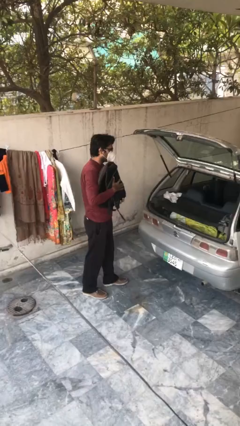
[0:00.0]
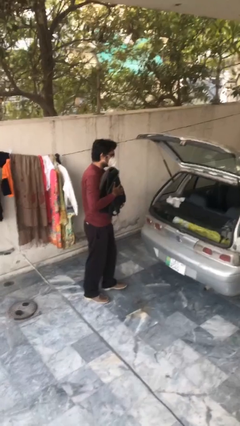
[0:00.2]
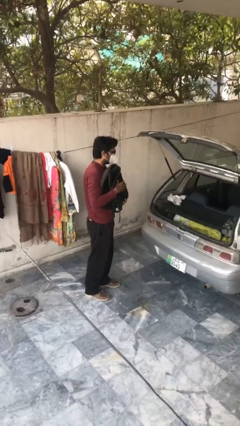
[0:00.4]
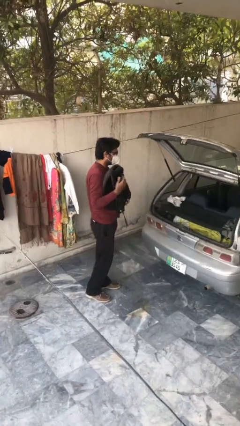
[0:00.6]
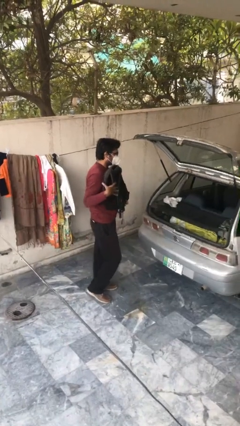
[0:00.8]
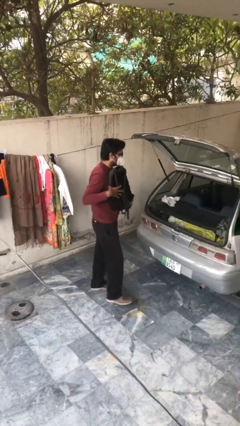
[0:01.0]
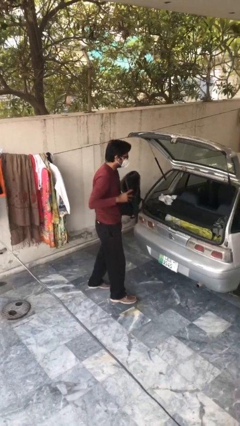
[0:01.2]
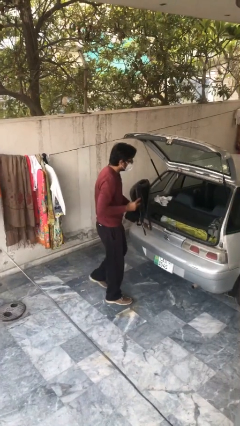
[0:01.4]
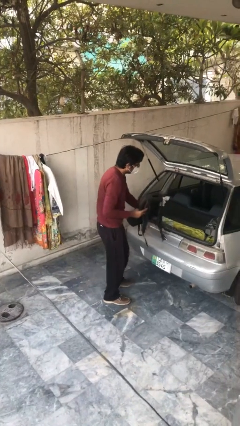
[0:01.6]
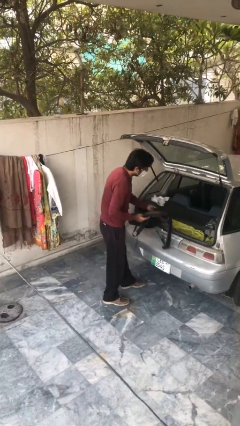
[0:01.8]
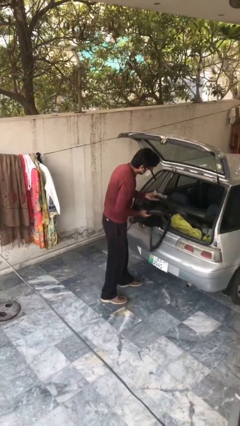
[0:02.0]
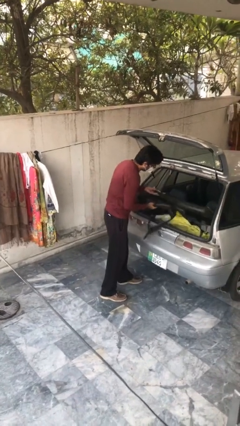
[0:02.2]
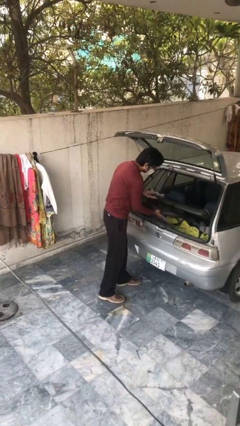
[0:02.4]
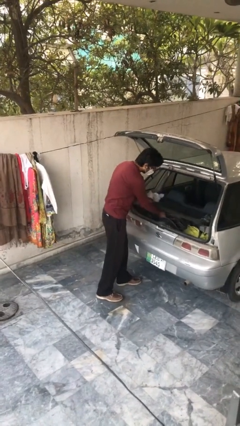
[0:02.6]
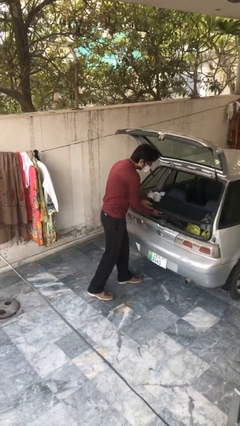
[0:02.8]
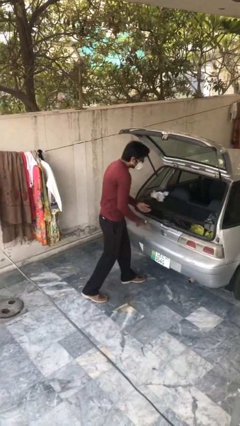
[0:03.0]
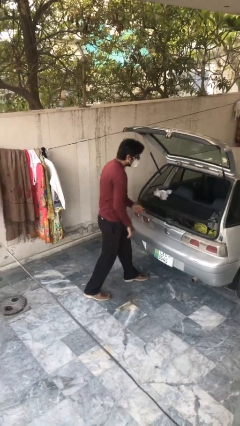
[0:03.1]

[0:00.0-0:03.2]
person loads car

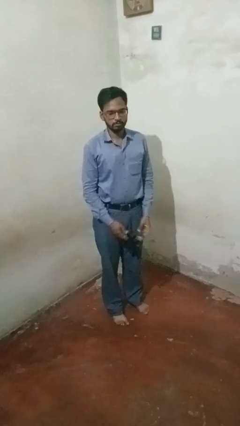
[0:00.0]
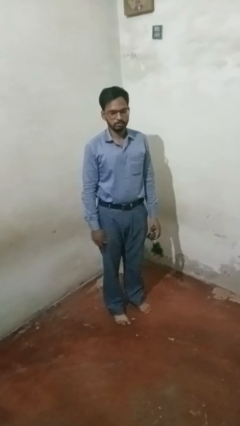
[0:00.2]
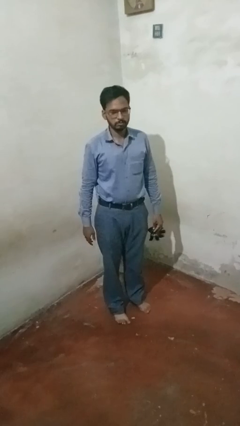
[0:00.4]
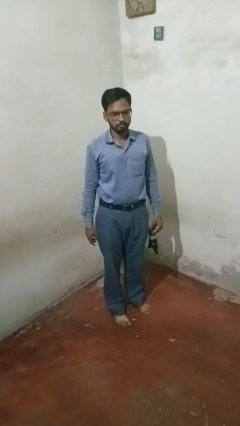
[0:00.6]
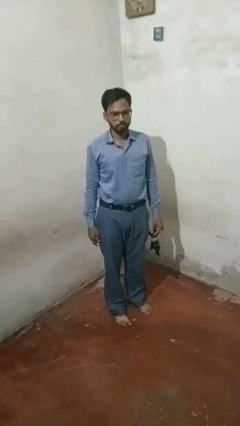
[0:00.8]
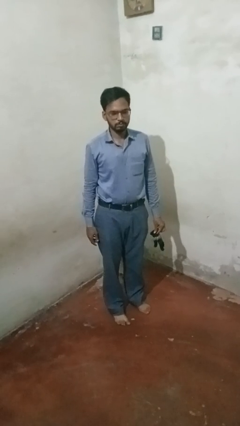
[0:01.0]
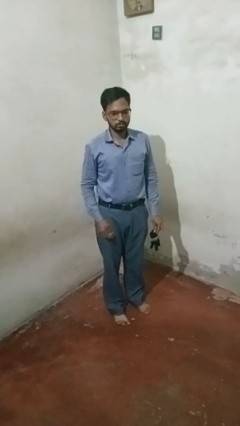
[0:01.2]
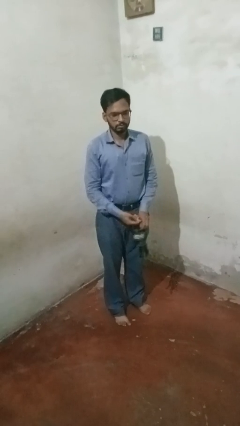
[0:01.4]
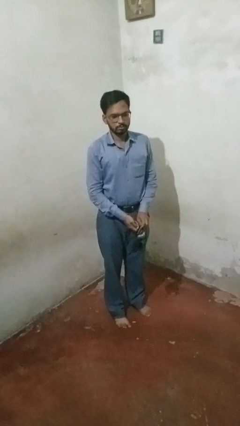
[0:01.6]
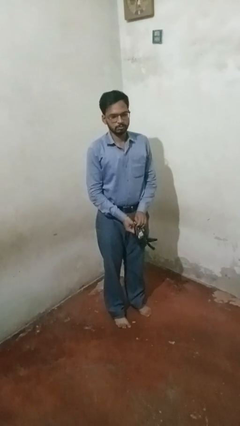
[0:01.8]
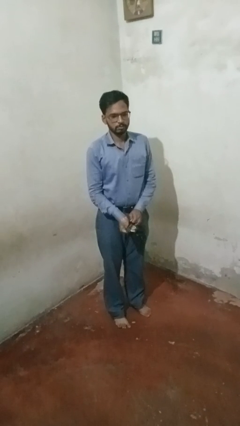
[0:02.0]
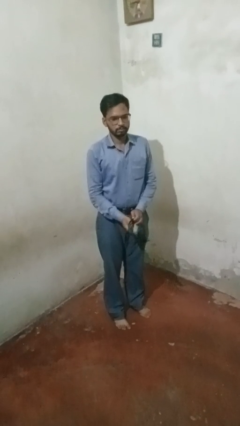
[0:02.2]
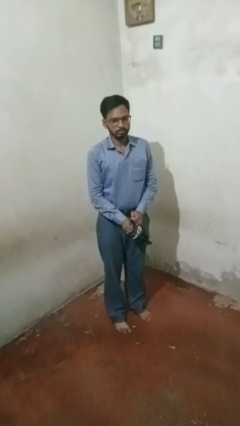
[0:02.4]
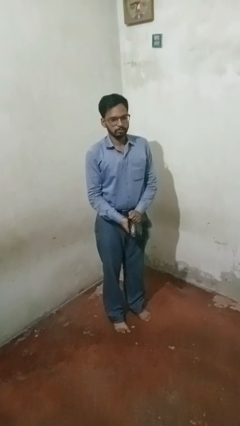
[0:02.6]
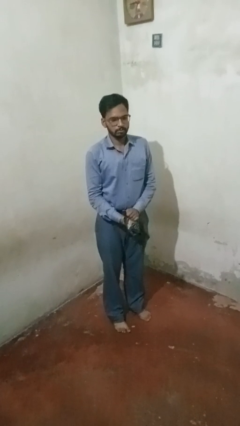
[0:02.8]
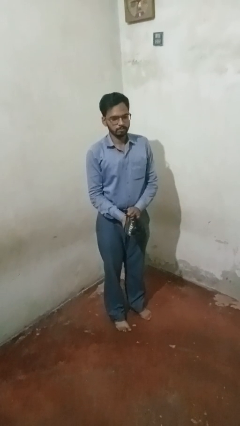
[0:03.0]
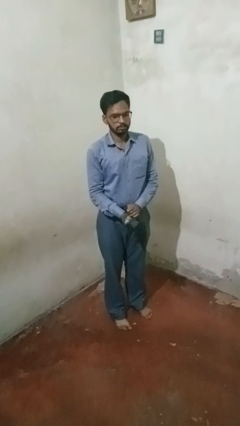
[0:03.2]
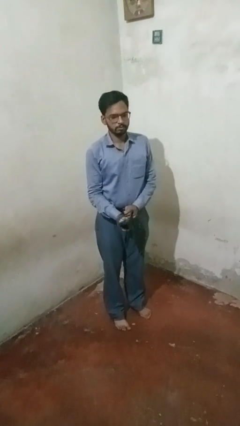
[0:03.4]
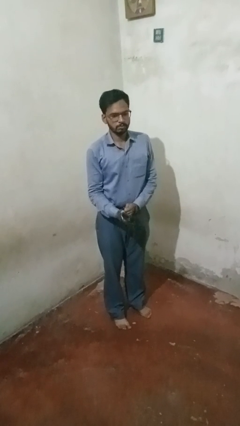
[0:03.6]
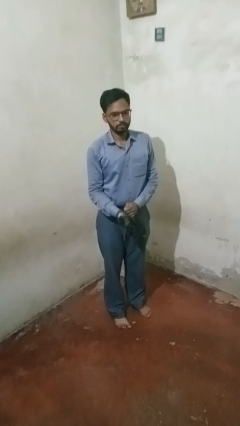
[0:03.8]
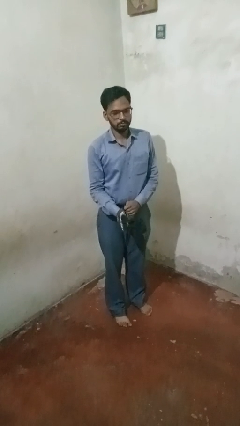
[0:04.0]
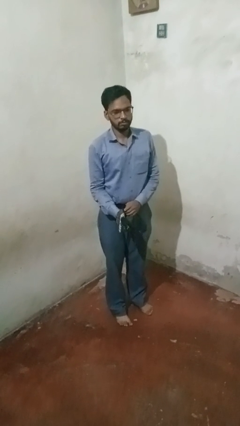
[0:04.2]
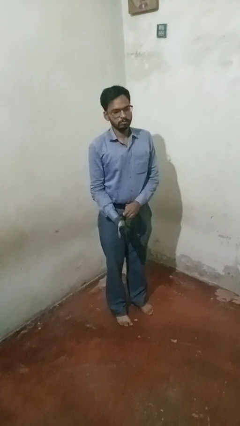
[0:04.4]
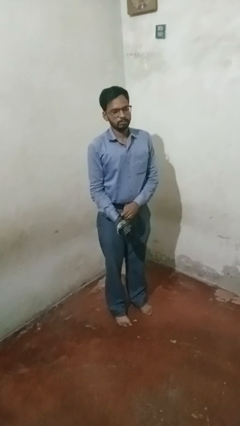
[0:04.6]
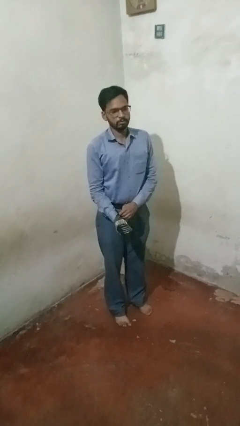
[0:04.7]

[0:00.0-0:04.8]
person puts on gloves

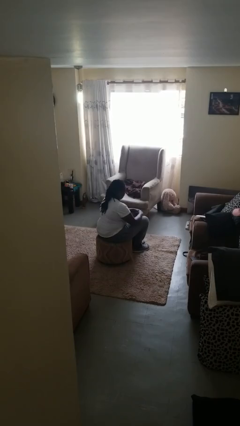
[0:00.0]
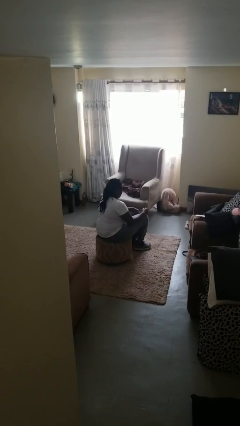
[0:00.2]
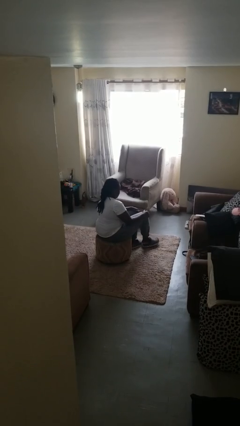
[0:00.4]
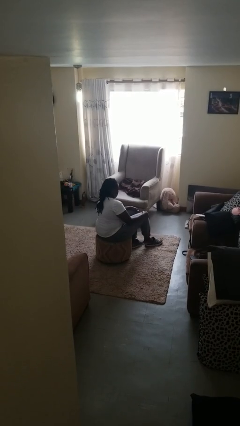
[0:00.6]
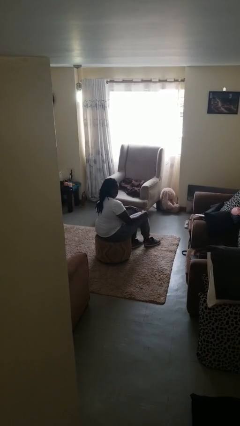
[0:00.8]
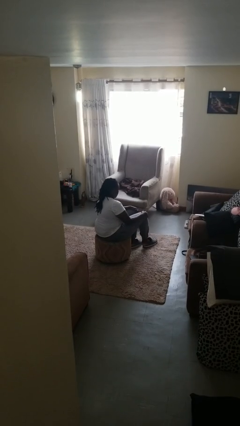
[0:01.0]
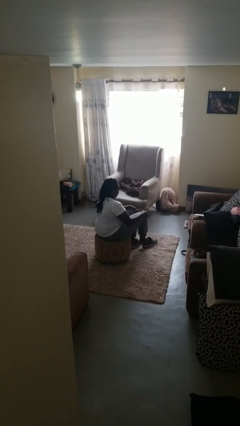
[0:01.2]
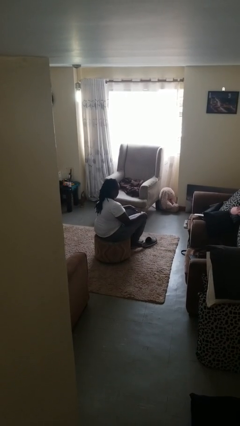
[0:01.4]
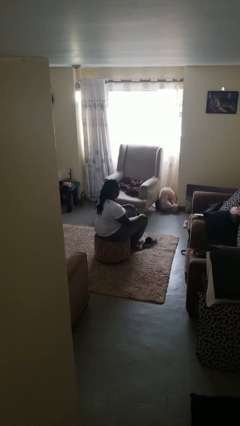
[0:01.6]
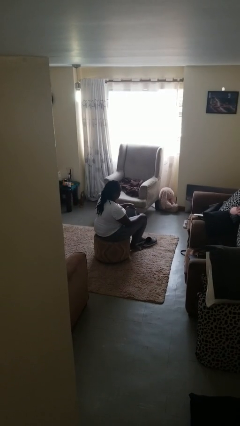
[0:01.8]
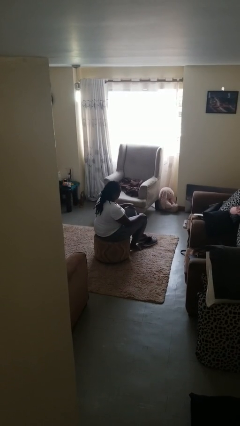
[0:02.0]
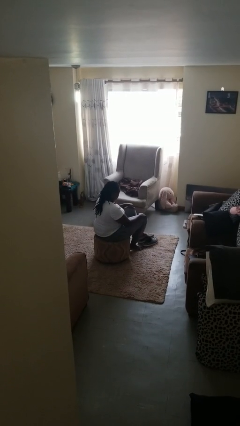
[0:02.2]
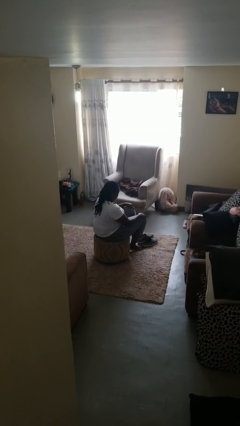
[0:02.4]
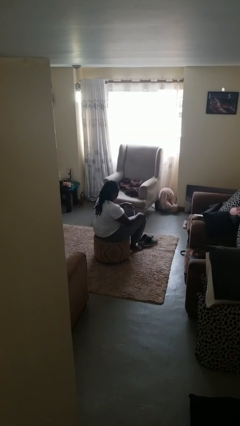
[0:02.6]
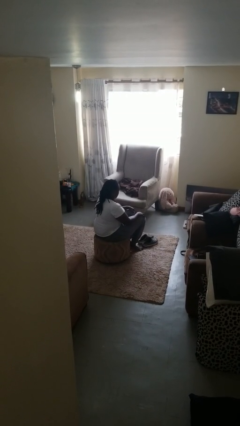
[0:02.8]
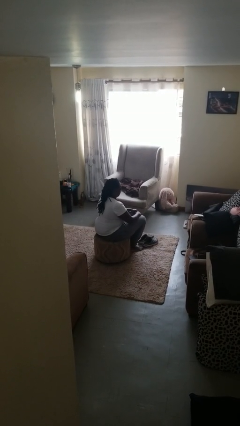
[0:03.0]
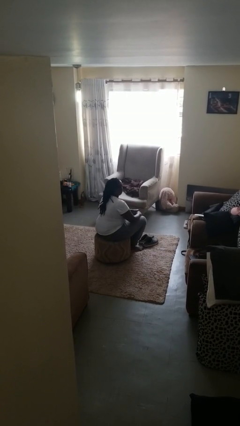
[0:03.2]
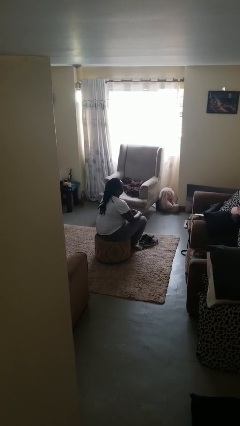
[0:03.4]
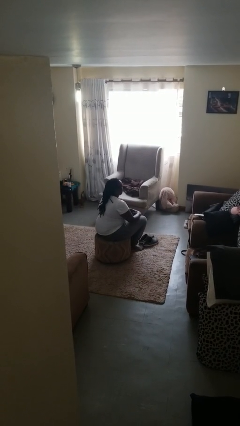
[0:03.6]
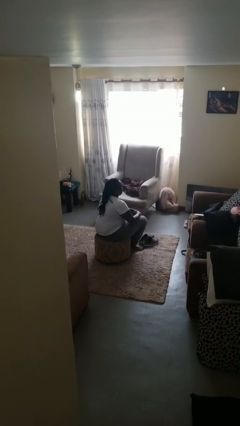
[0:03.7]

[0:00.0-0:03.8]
person takes off shoes

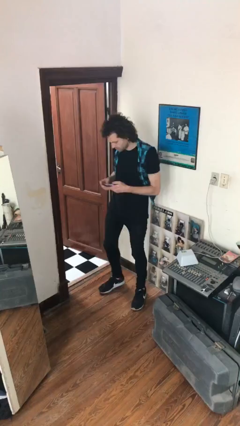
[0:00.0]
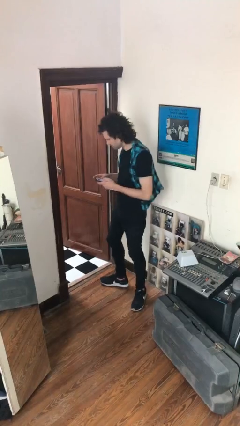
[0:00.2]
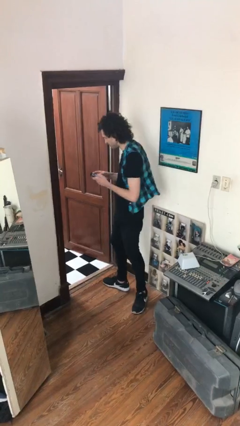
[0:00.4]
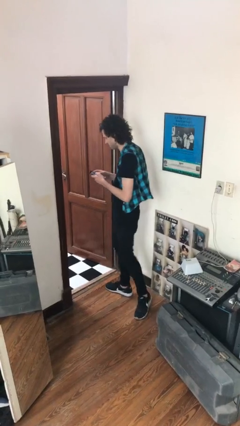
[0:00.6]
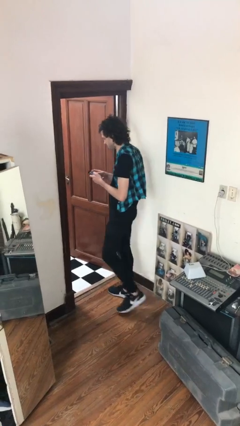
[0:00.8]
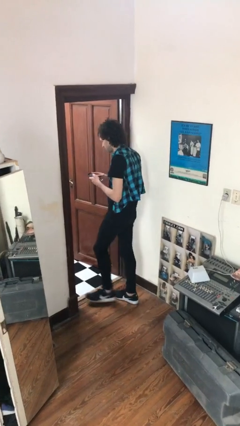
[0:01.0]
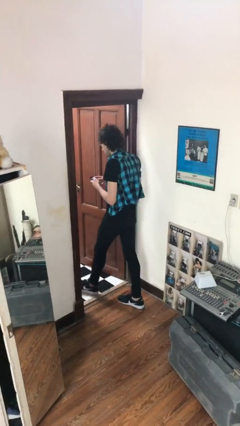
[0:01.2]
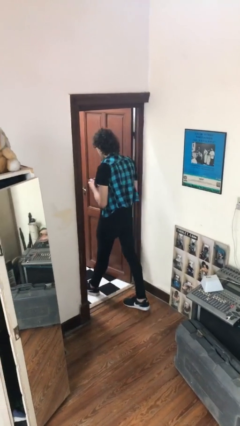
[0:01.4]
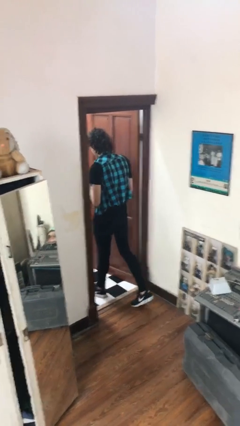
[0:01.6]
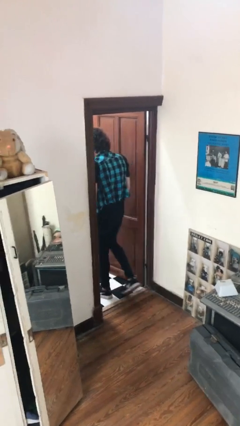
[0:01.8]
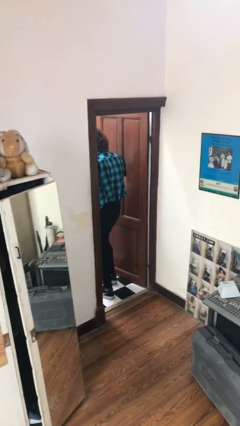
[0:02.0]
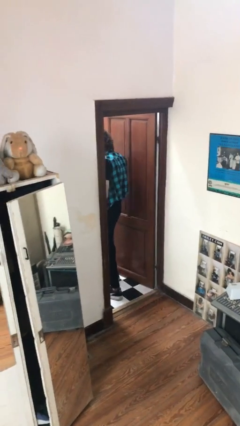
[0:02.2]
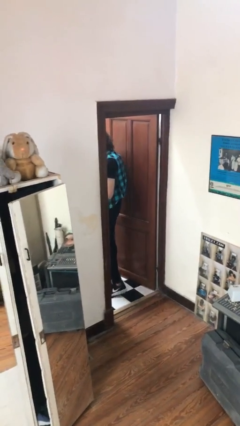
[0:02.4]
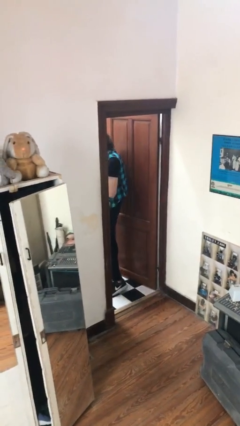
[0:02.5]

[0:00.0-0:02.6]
person exits scene through structure

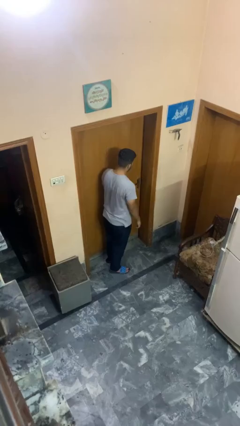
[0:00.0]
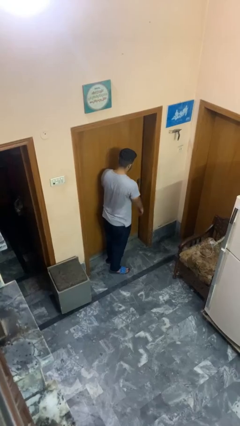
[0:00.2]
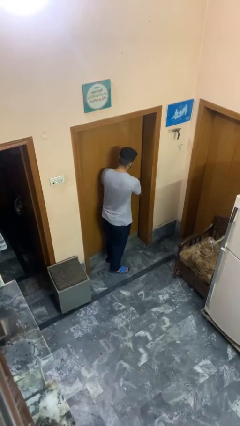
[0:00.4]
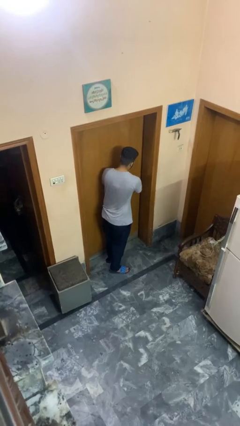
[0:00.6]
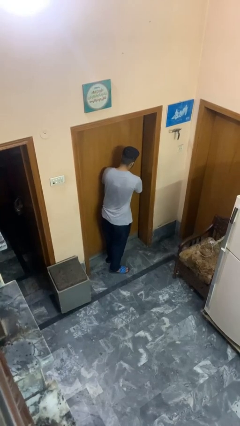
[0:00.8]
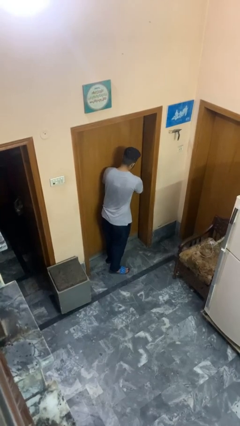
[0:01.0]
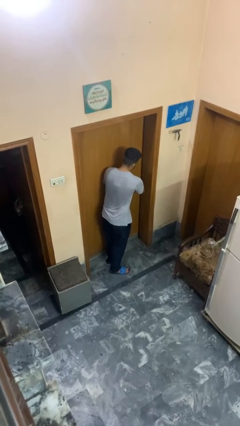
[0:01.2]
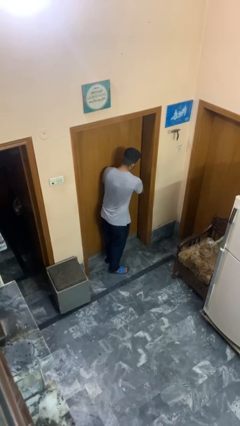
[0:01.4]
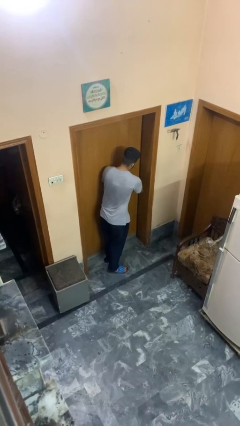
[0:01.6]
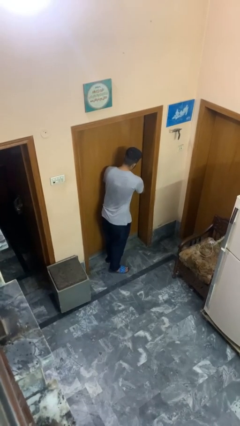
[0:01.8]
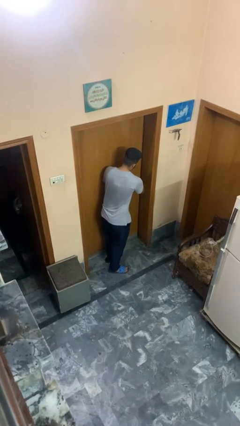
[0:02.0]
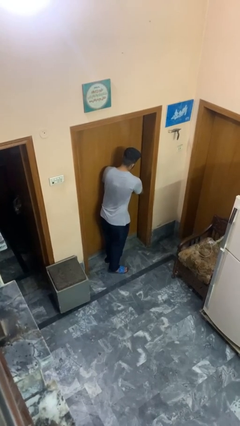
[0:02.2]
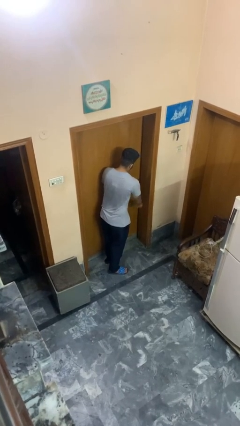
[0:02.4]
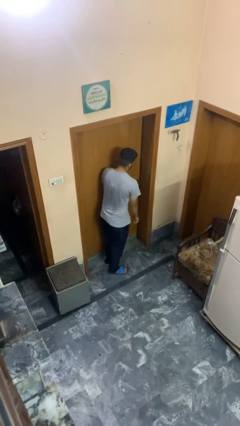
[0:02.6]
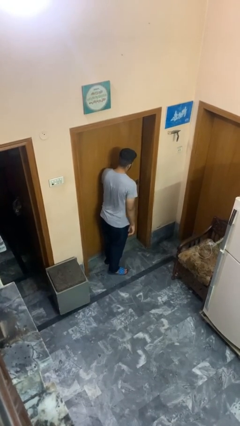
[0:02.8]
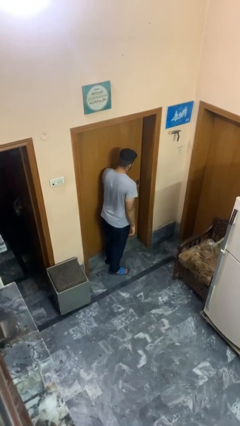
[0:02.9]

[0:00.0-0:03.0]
person unlocks door with keys

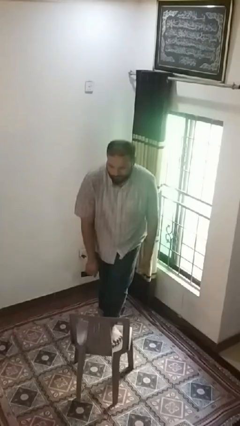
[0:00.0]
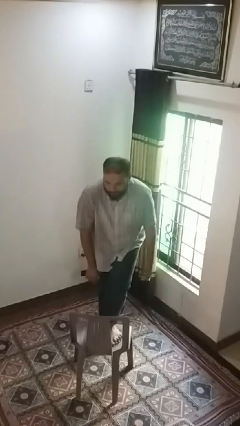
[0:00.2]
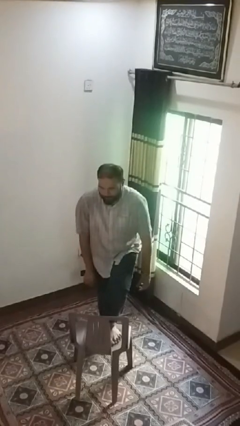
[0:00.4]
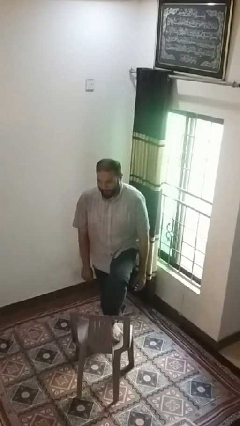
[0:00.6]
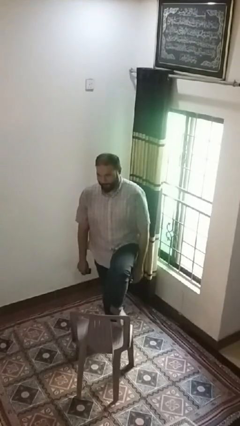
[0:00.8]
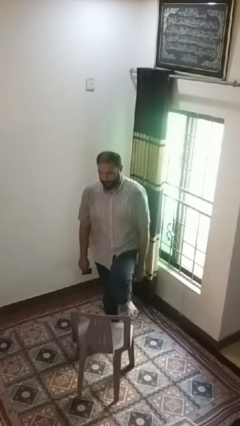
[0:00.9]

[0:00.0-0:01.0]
person climbs off chair
